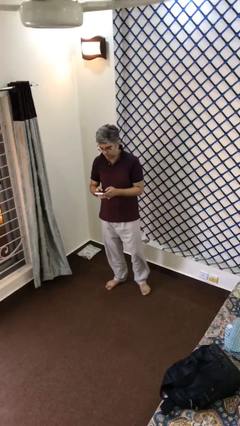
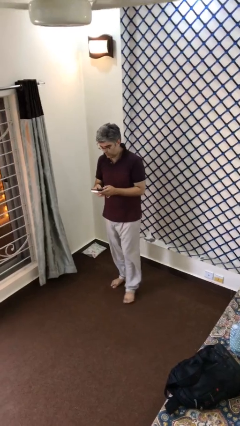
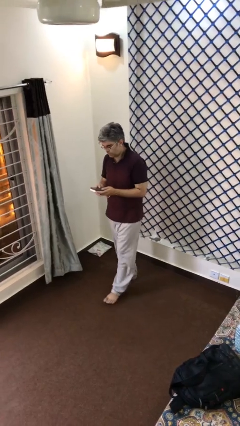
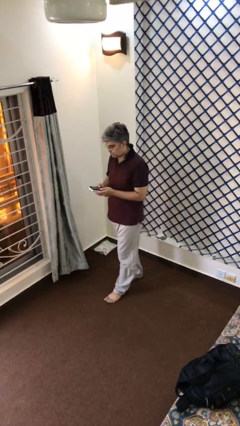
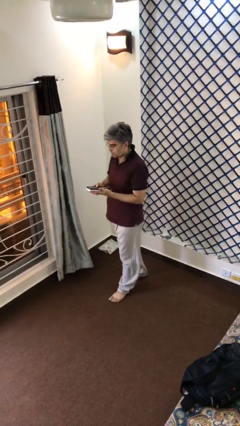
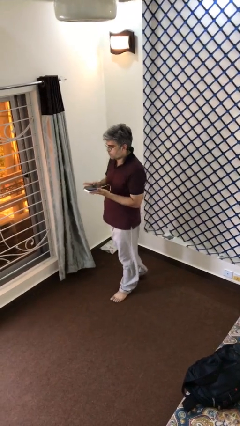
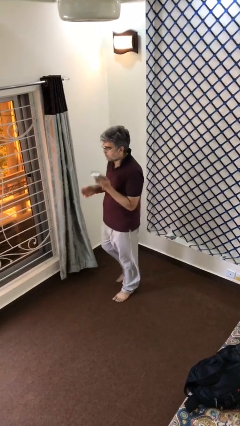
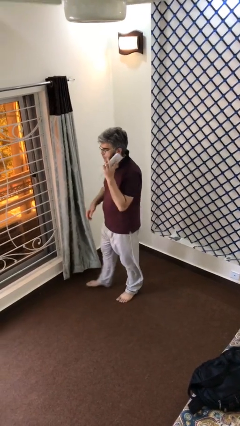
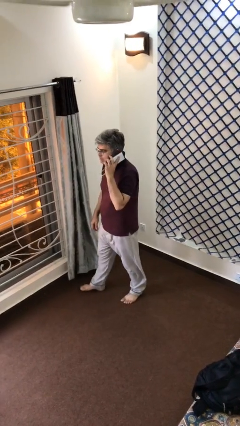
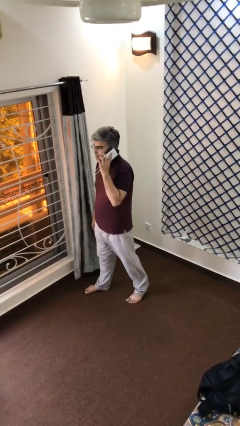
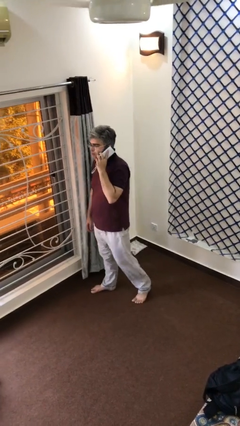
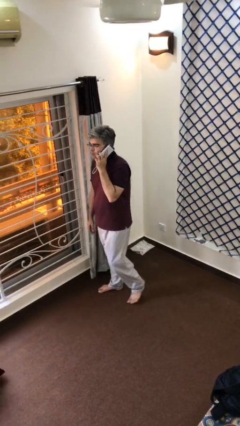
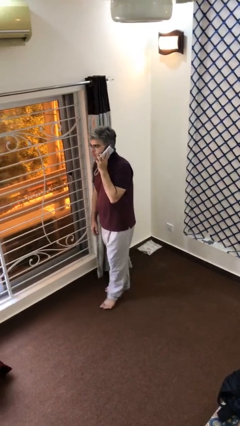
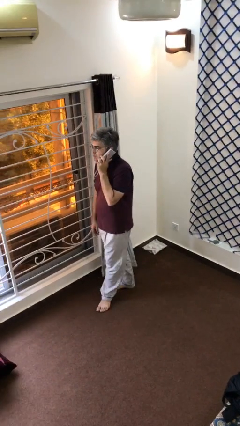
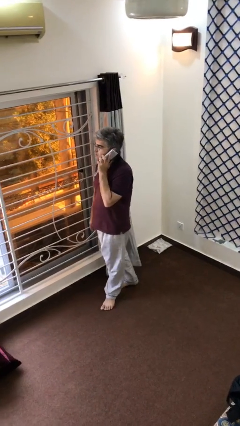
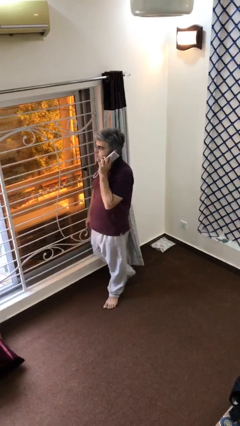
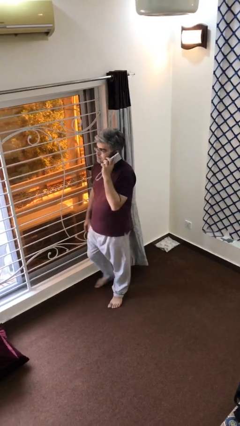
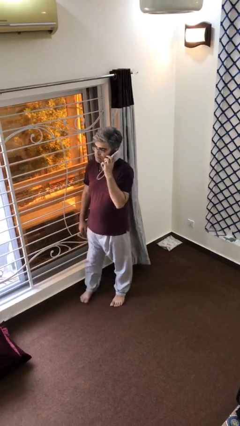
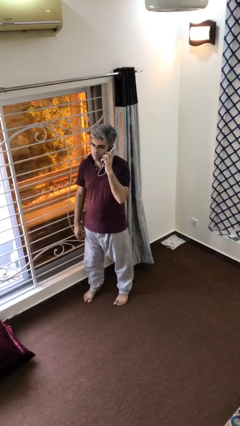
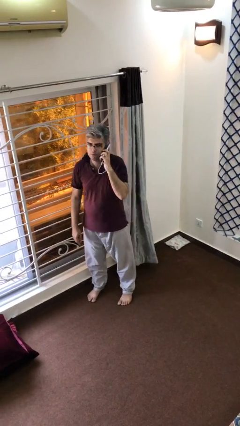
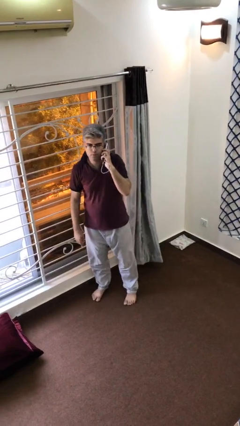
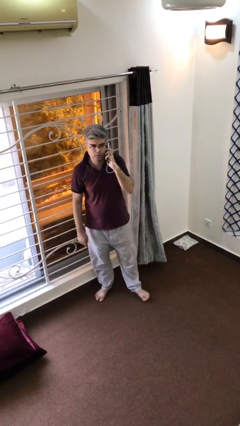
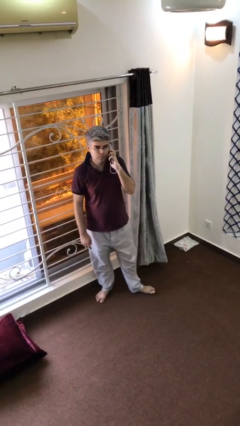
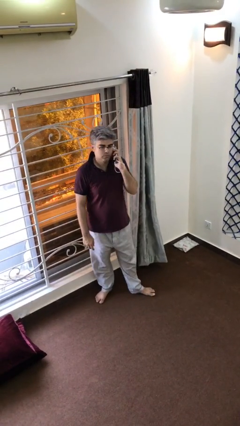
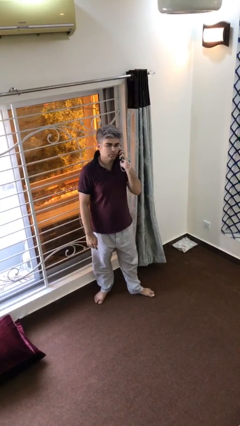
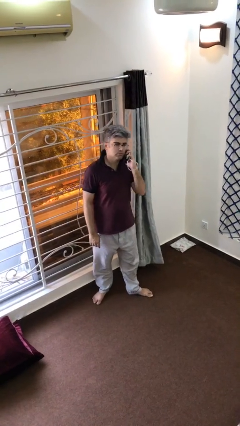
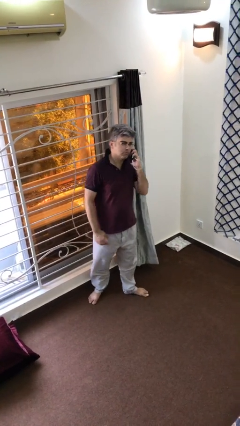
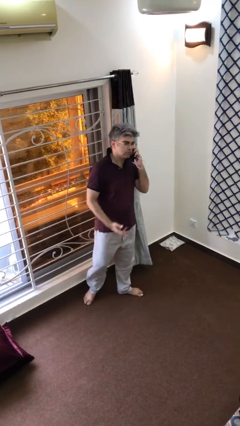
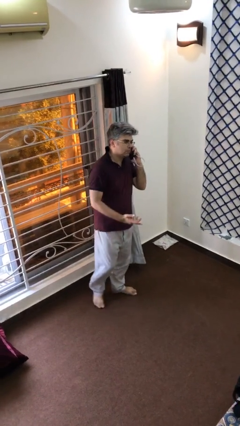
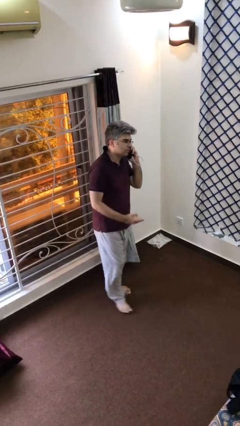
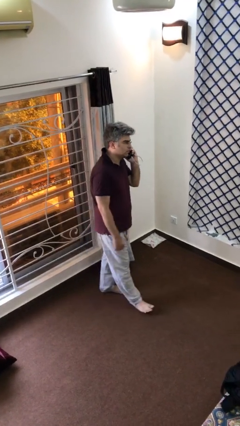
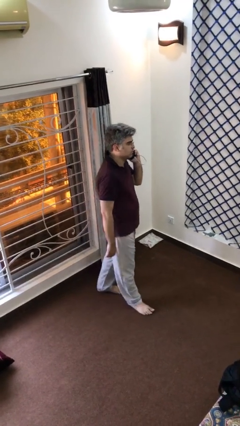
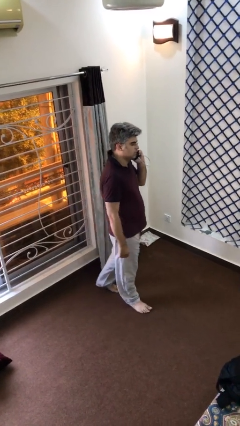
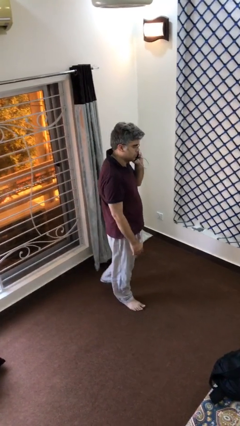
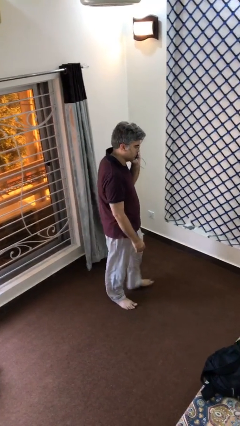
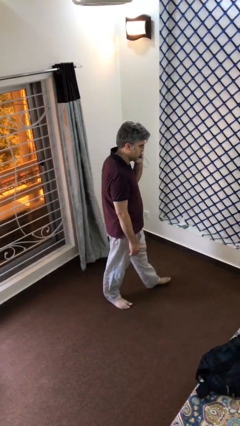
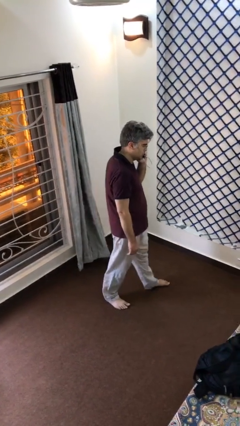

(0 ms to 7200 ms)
person talks on phone

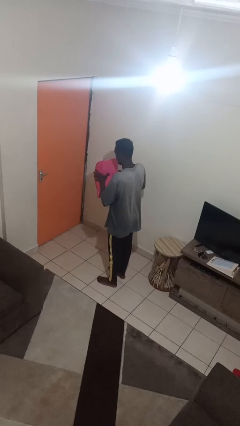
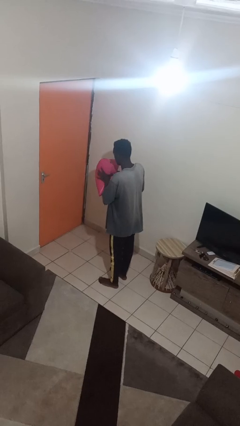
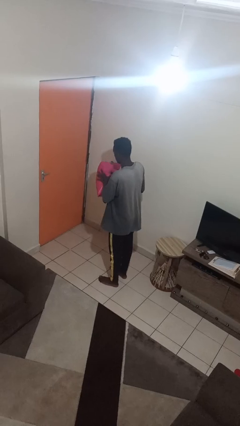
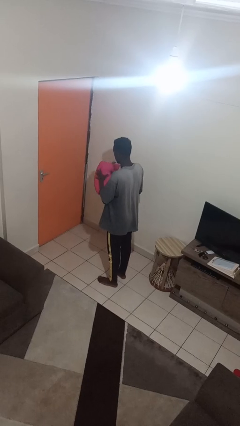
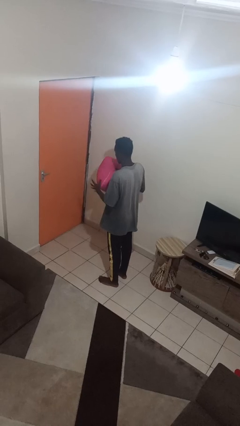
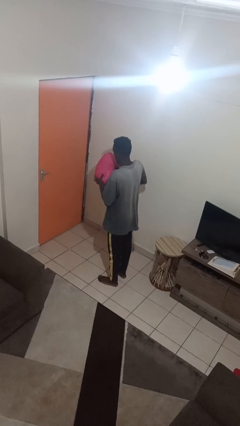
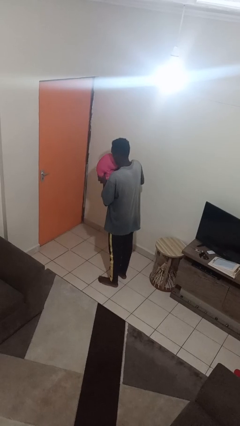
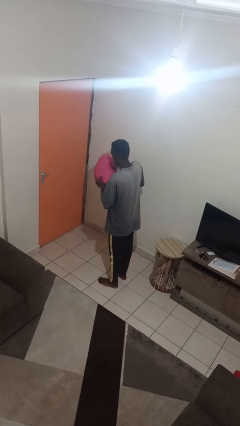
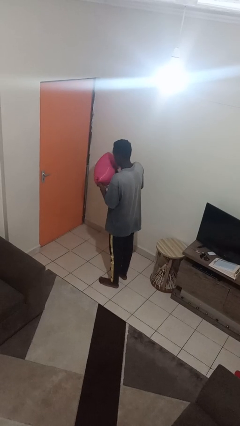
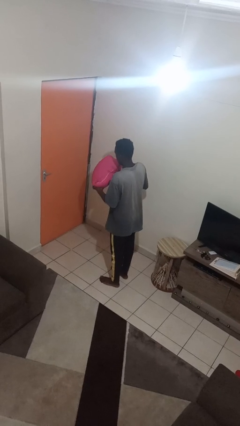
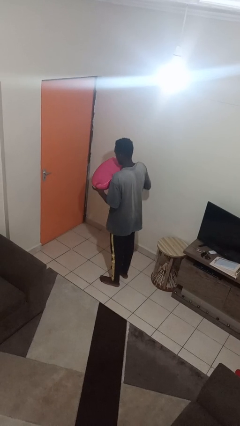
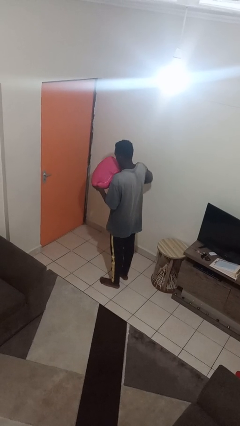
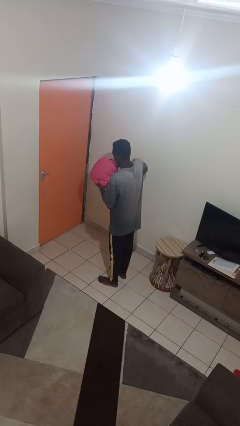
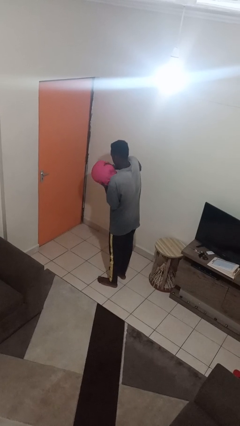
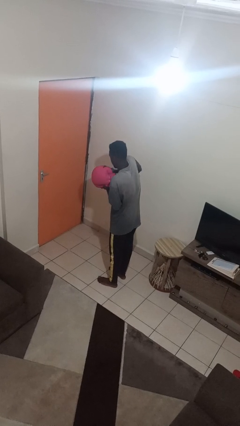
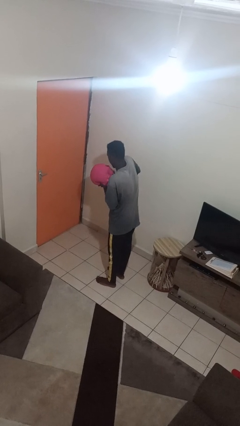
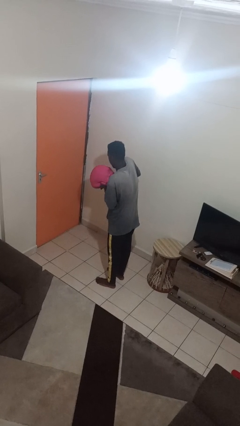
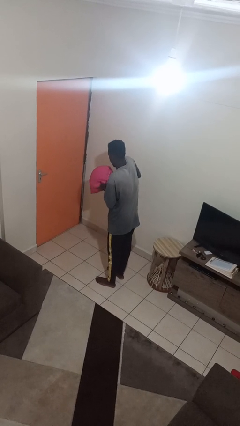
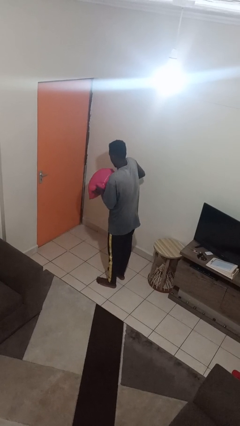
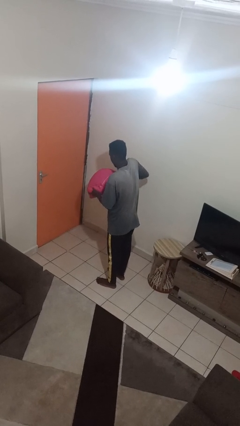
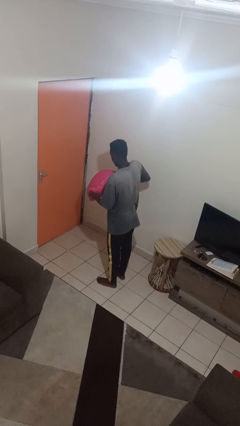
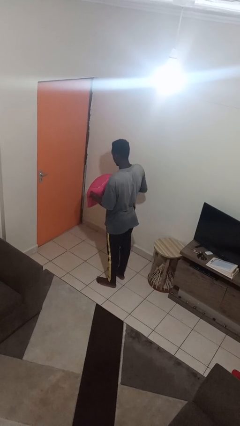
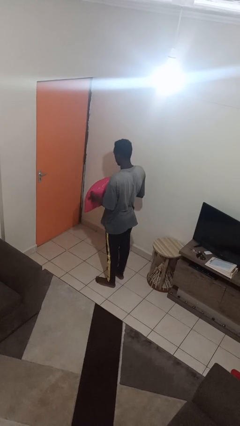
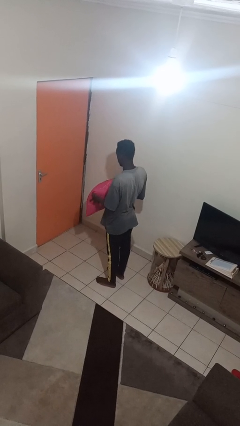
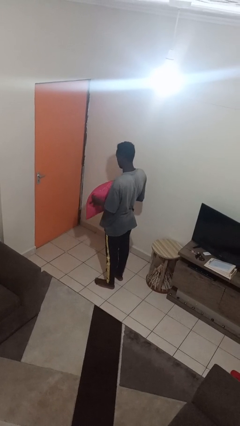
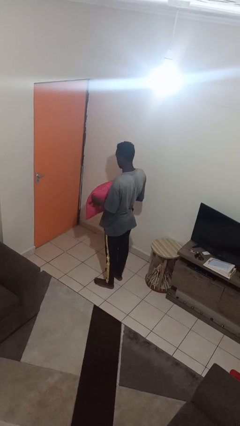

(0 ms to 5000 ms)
person squeezes object

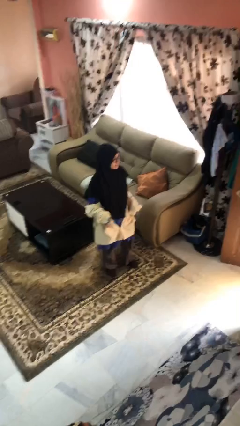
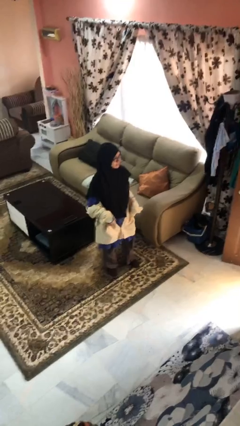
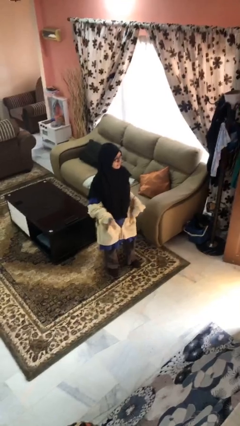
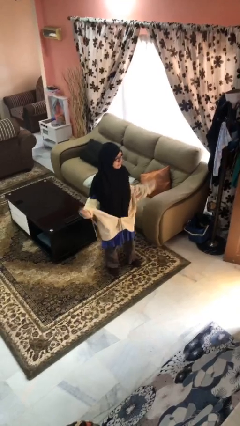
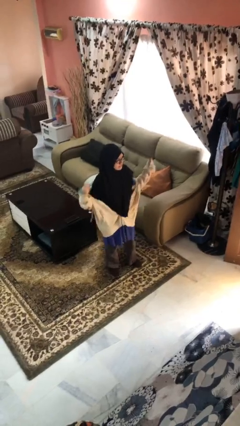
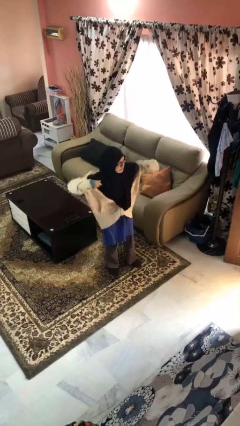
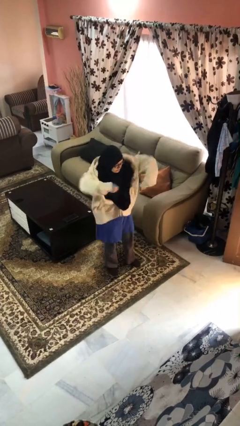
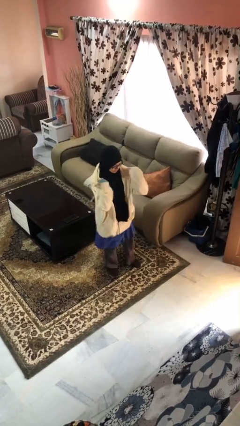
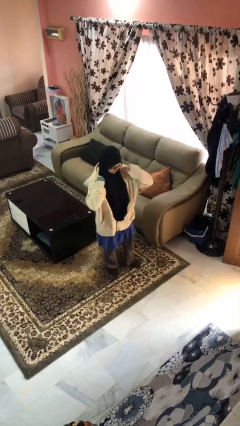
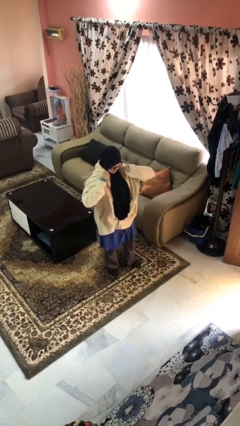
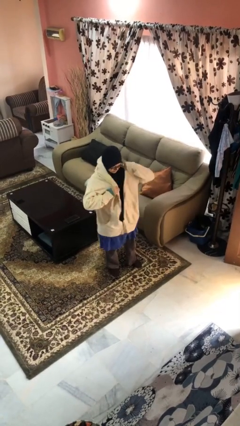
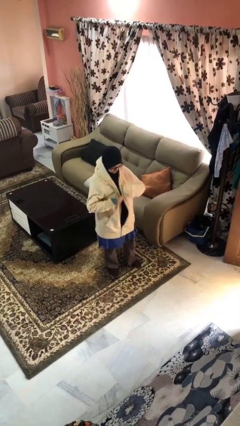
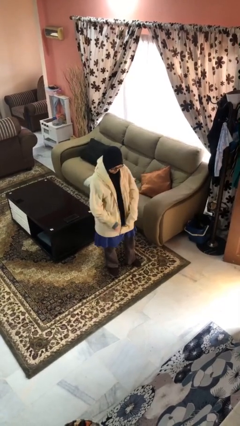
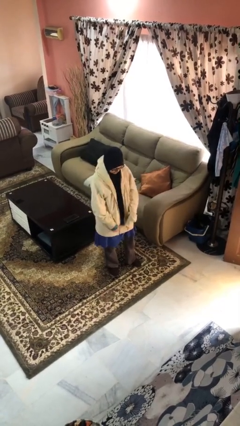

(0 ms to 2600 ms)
person puts on jacket

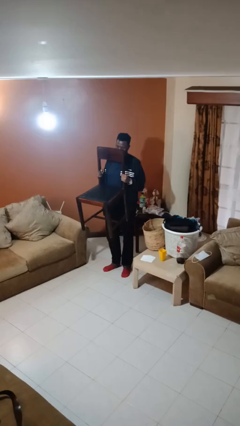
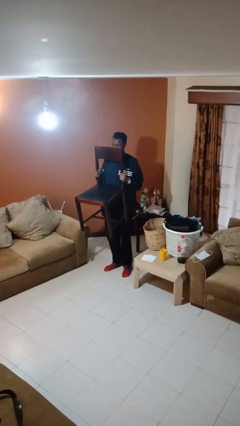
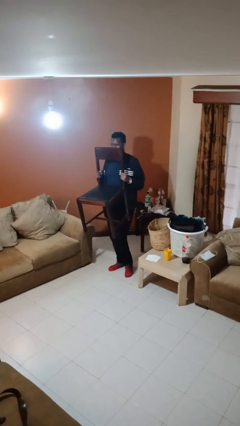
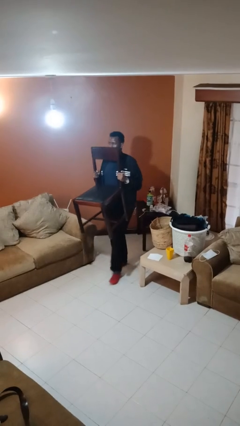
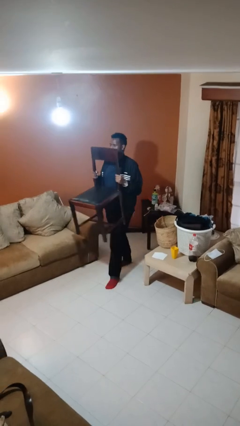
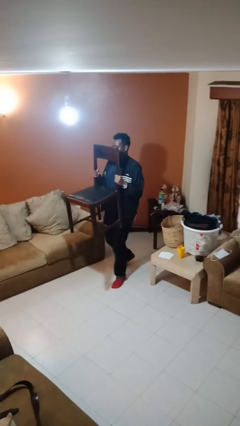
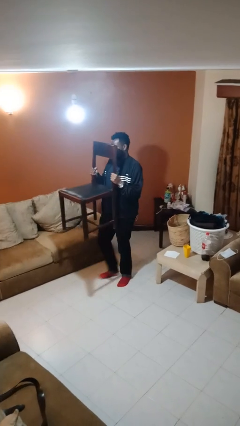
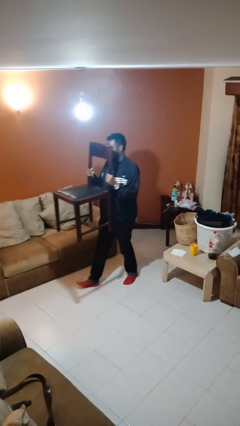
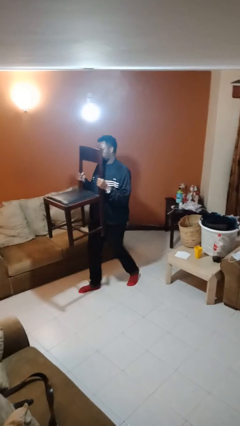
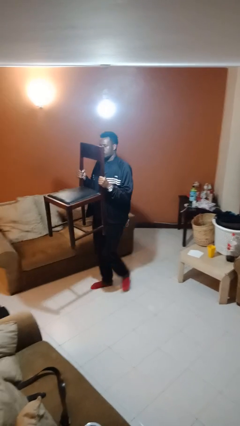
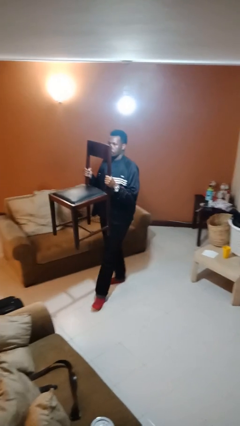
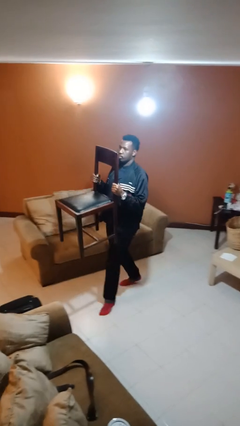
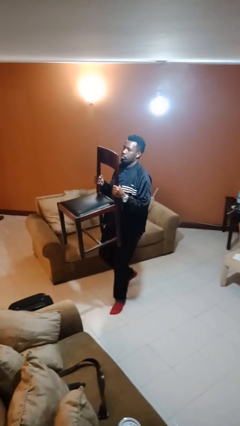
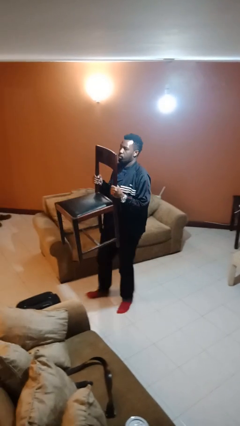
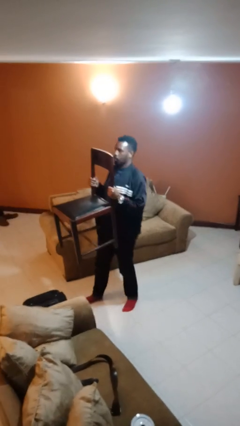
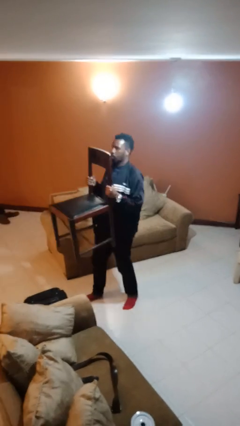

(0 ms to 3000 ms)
person carries furniture
